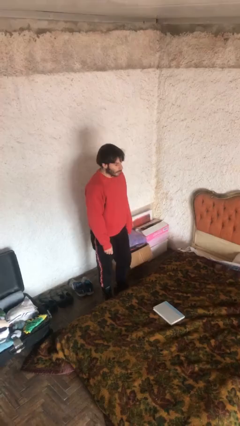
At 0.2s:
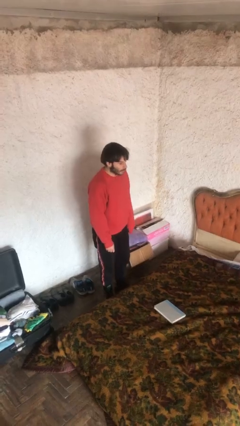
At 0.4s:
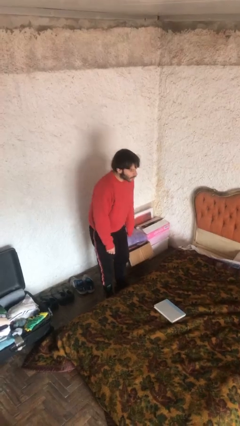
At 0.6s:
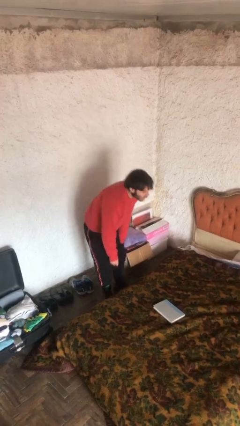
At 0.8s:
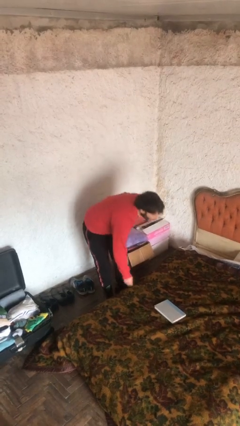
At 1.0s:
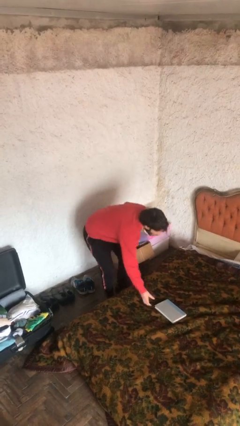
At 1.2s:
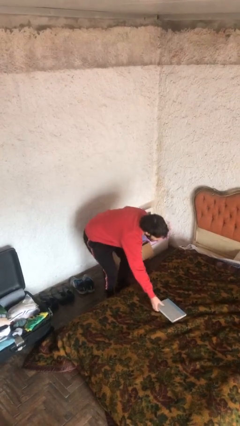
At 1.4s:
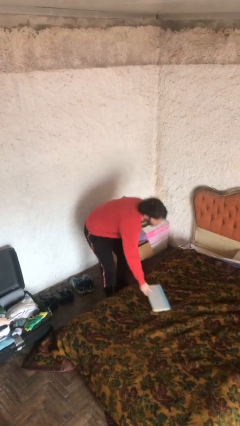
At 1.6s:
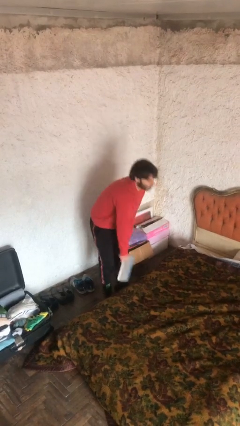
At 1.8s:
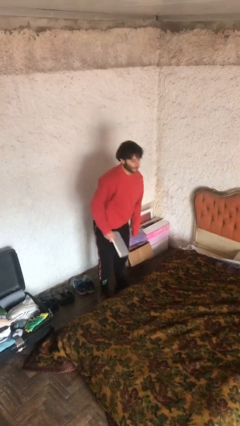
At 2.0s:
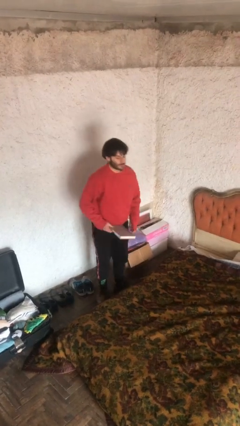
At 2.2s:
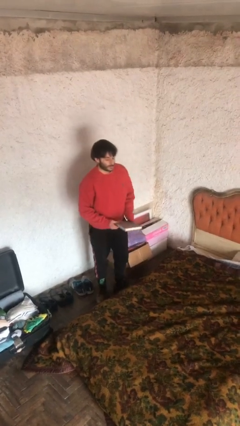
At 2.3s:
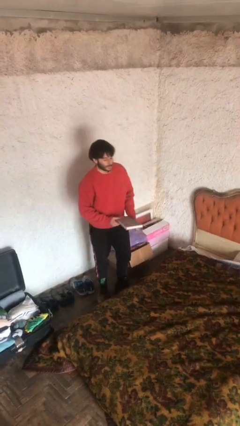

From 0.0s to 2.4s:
person picks up object from bed

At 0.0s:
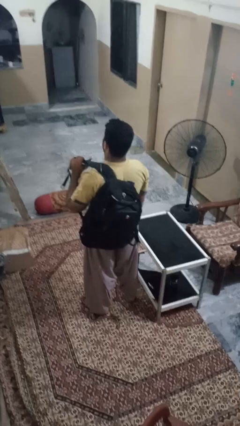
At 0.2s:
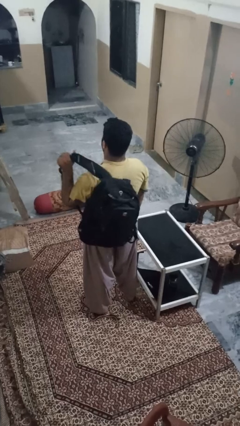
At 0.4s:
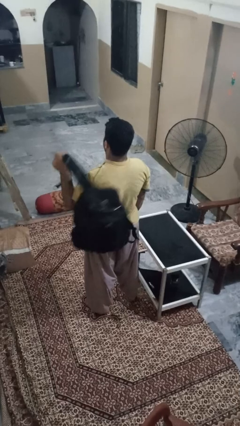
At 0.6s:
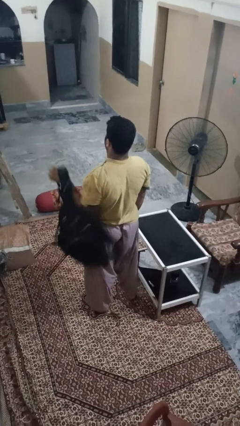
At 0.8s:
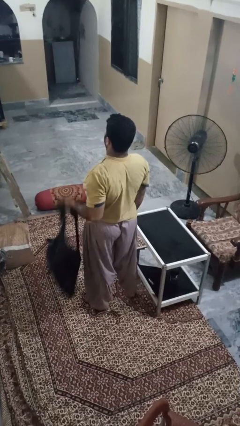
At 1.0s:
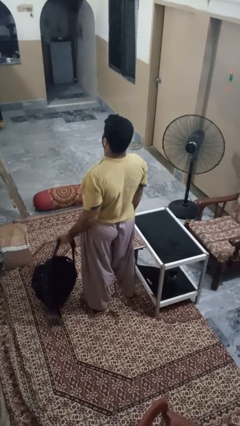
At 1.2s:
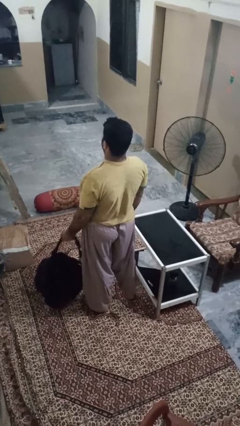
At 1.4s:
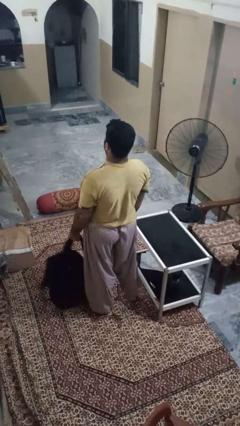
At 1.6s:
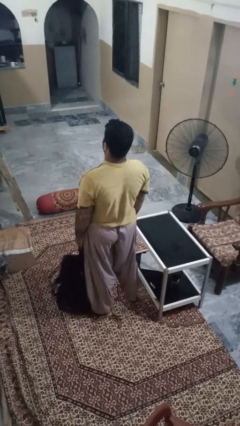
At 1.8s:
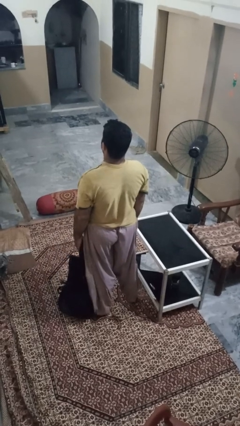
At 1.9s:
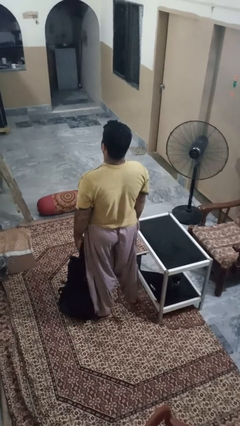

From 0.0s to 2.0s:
person takes off backpack

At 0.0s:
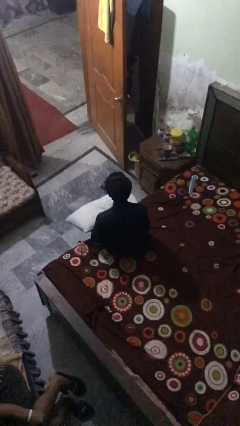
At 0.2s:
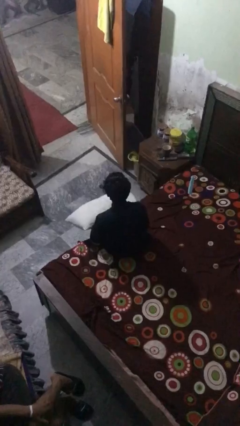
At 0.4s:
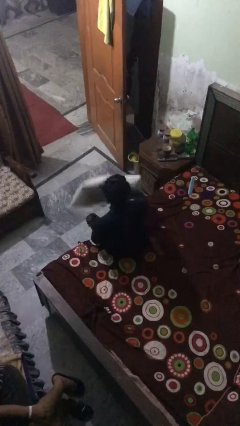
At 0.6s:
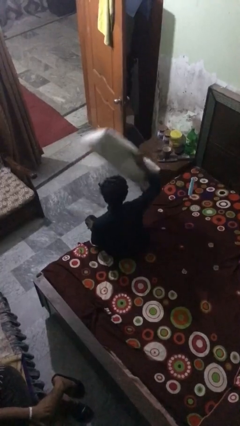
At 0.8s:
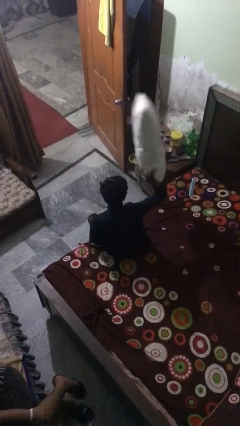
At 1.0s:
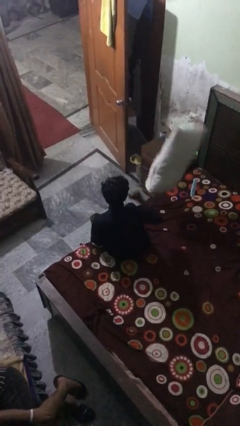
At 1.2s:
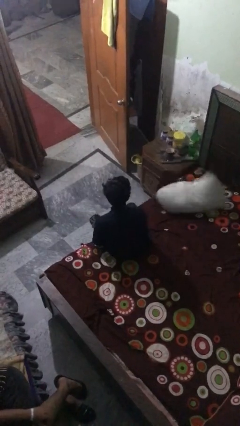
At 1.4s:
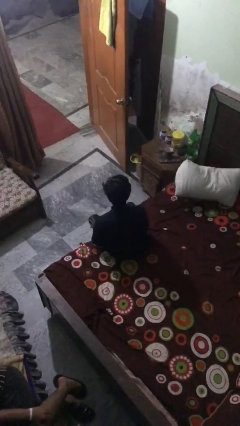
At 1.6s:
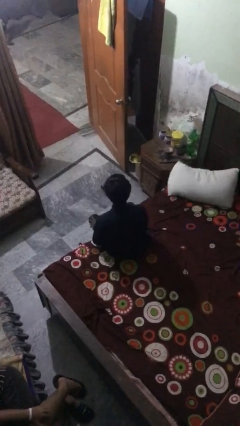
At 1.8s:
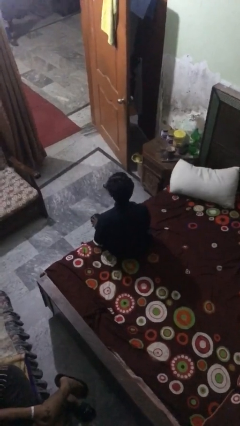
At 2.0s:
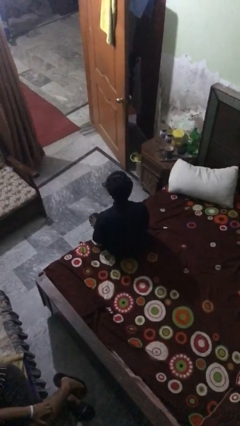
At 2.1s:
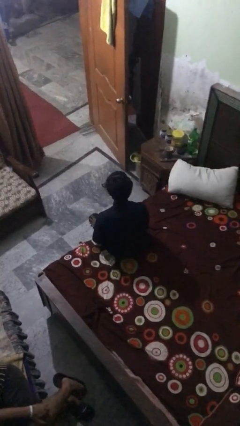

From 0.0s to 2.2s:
person throws object on bed

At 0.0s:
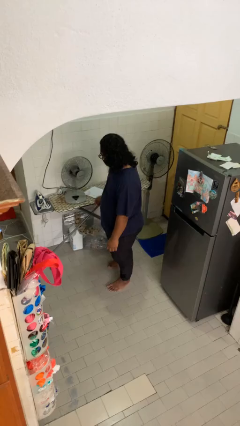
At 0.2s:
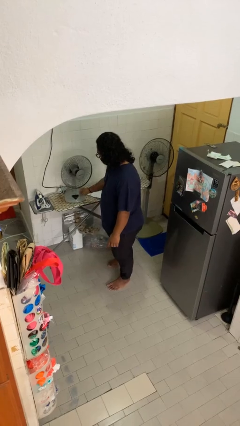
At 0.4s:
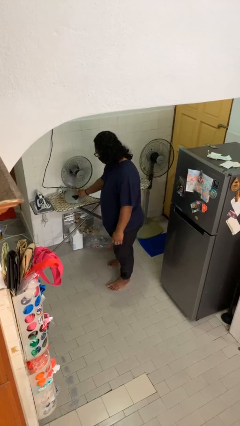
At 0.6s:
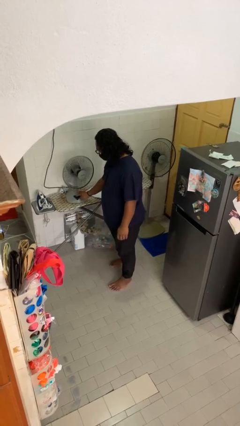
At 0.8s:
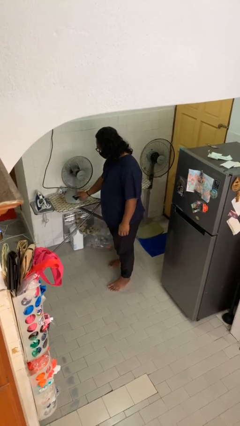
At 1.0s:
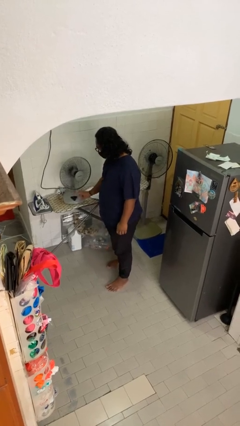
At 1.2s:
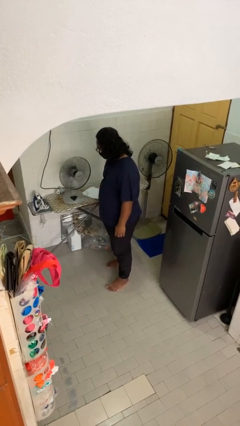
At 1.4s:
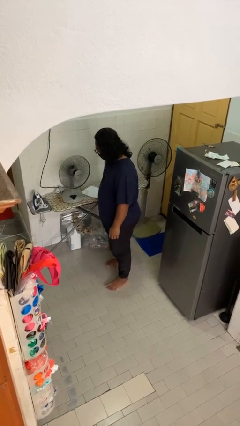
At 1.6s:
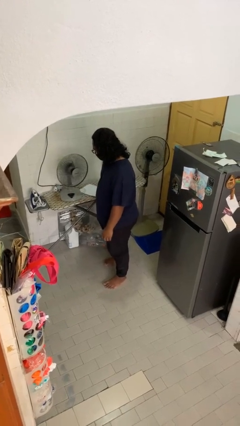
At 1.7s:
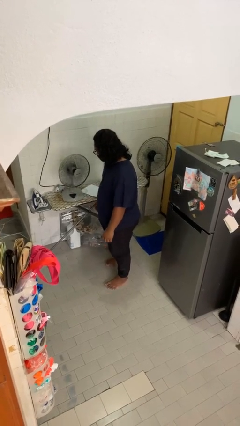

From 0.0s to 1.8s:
person turns on fan

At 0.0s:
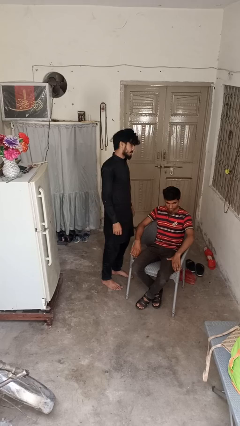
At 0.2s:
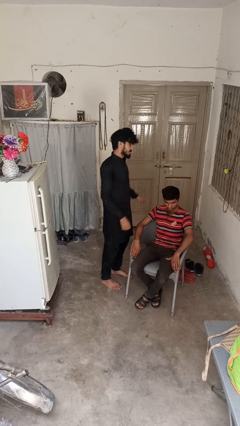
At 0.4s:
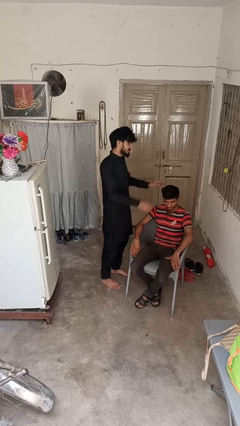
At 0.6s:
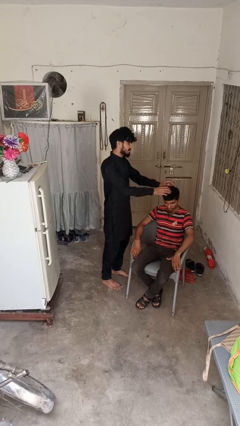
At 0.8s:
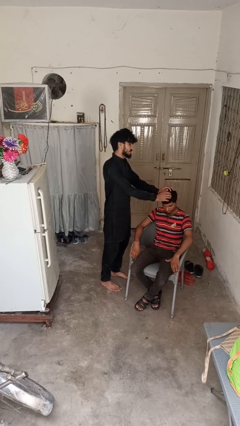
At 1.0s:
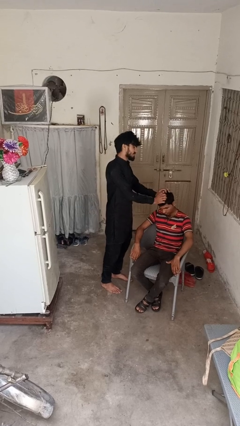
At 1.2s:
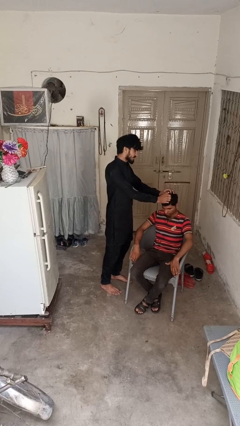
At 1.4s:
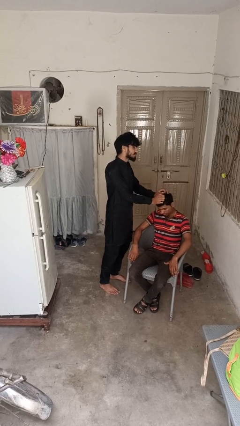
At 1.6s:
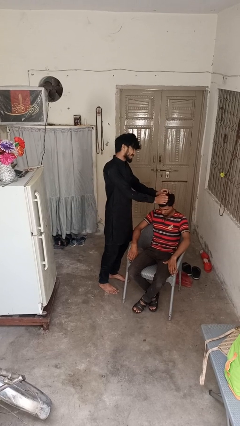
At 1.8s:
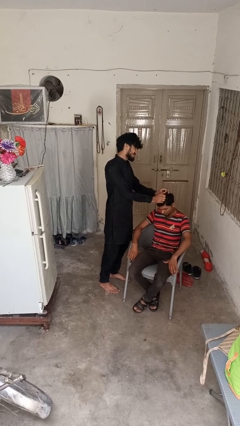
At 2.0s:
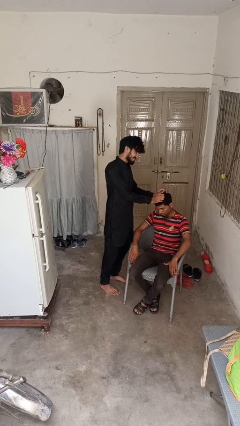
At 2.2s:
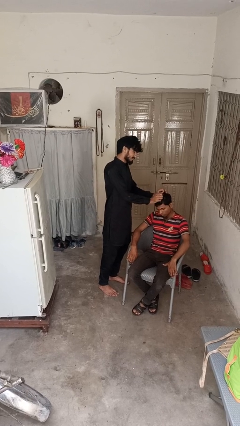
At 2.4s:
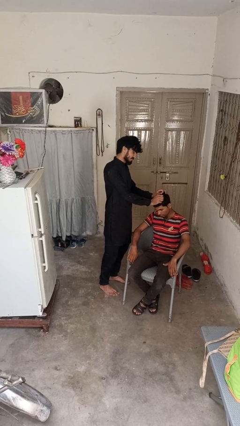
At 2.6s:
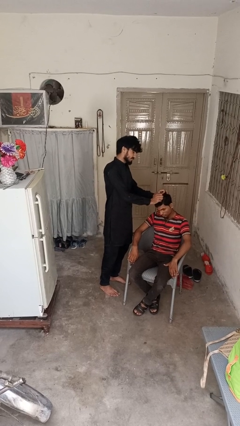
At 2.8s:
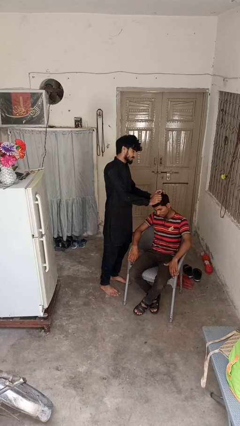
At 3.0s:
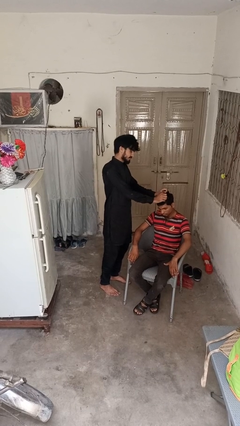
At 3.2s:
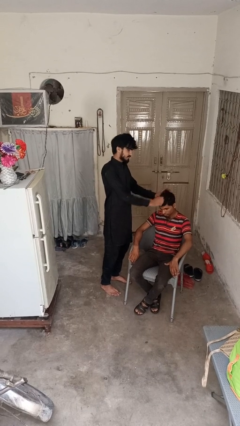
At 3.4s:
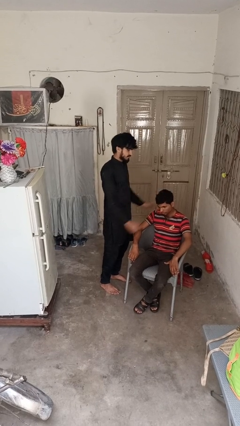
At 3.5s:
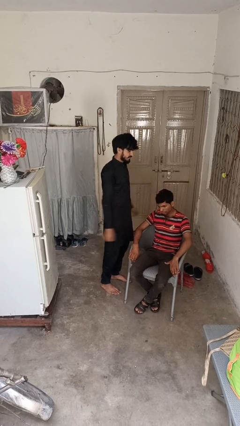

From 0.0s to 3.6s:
person grabs person by hair

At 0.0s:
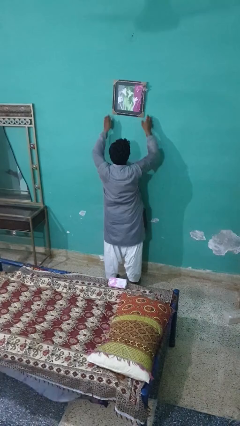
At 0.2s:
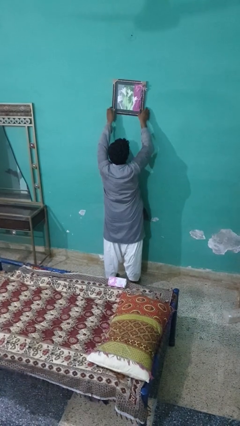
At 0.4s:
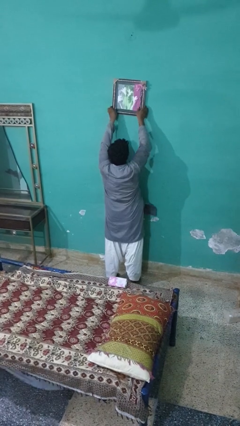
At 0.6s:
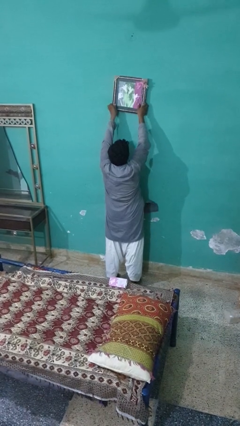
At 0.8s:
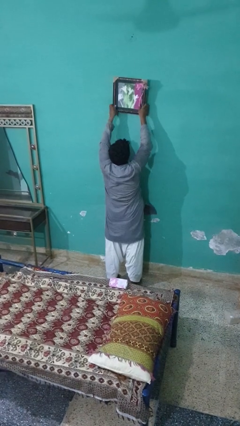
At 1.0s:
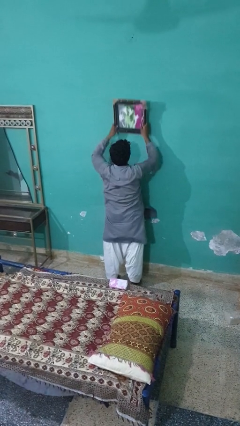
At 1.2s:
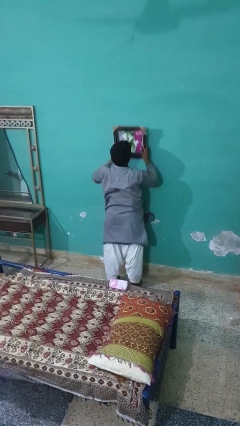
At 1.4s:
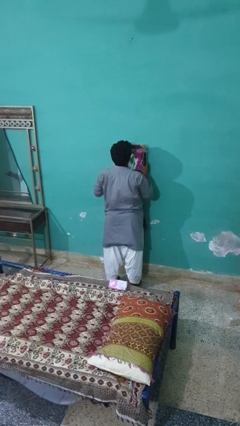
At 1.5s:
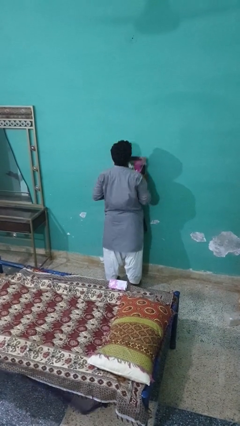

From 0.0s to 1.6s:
person takes down picture frame

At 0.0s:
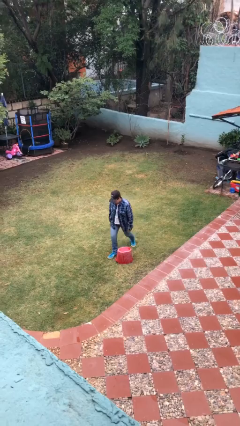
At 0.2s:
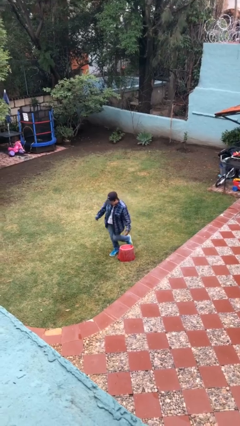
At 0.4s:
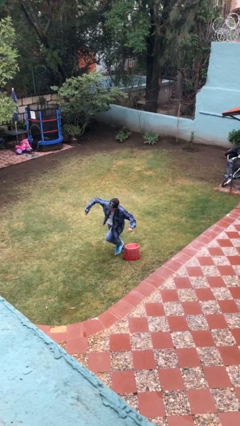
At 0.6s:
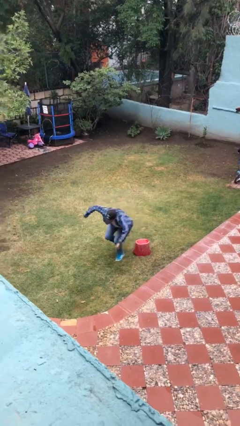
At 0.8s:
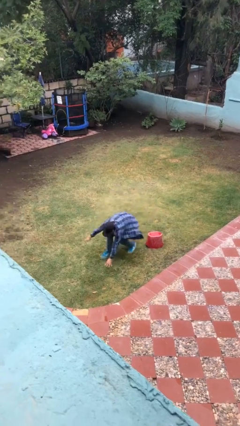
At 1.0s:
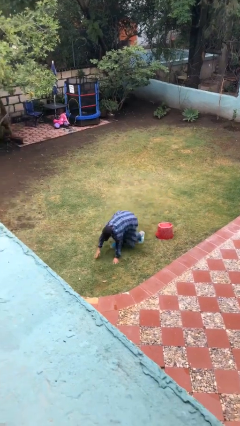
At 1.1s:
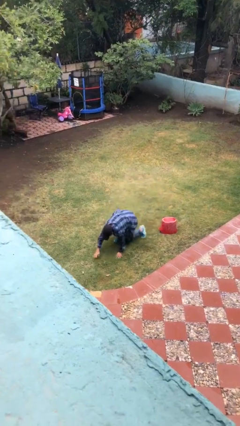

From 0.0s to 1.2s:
person trips on object on floor

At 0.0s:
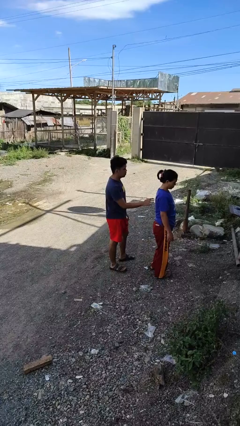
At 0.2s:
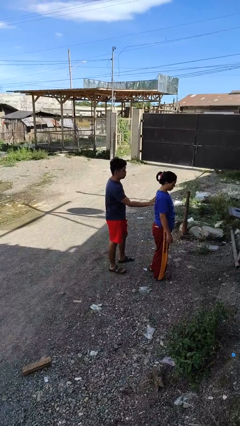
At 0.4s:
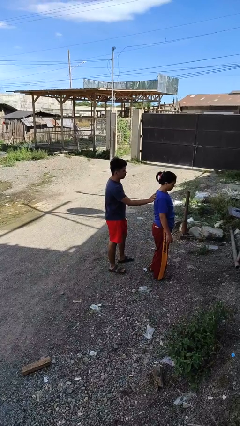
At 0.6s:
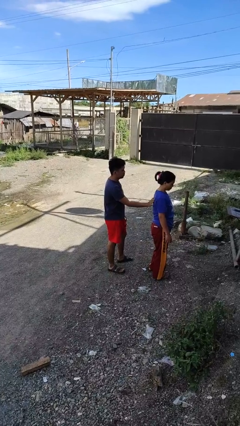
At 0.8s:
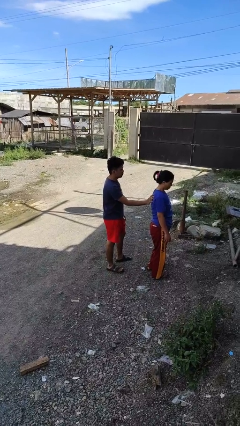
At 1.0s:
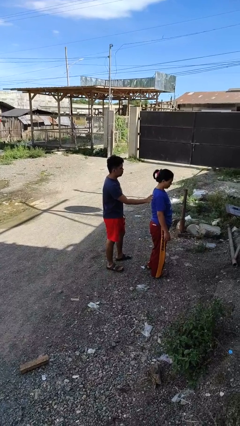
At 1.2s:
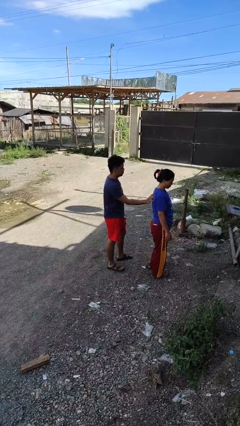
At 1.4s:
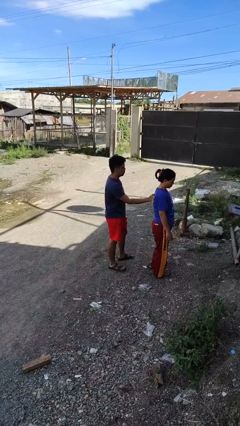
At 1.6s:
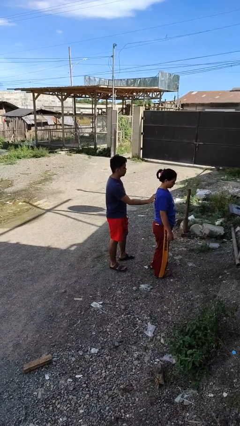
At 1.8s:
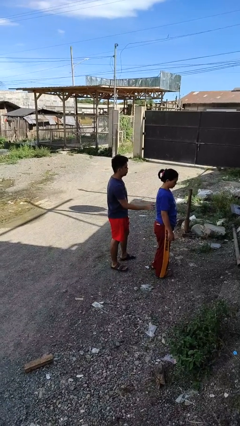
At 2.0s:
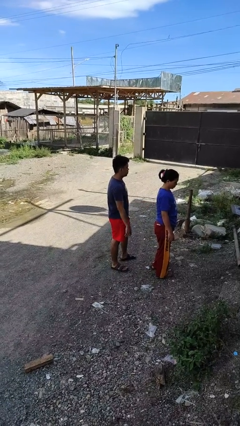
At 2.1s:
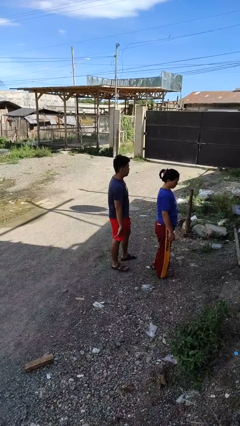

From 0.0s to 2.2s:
person touches back of person
